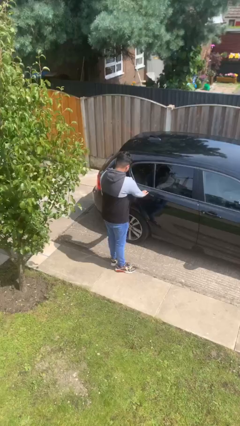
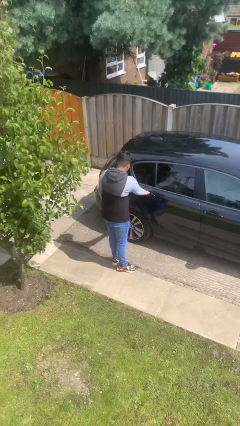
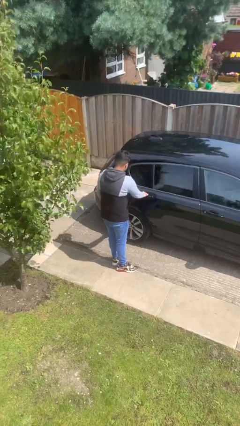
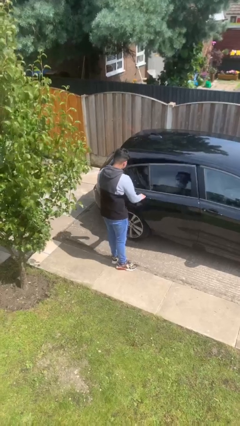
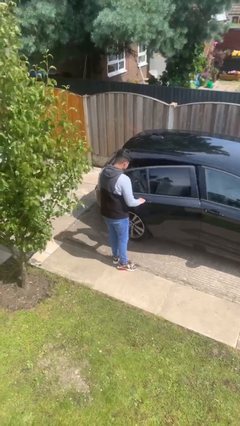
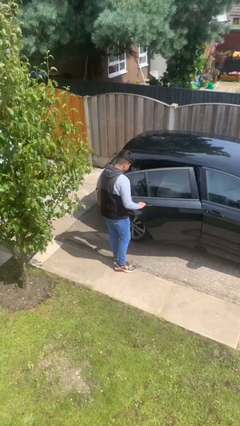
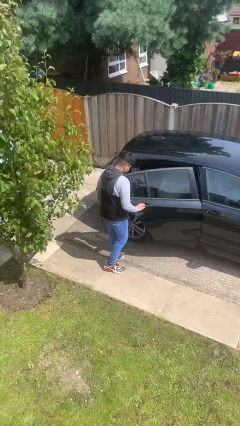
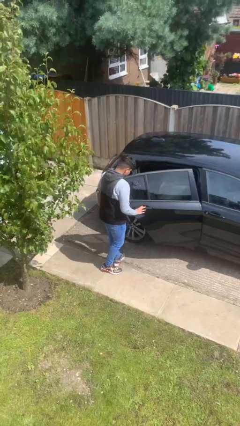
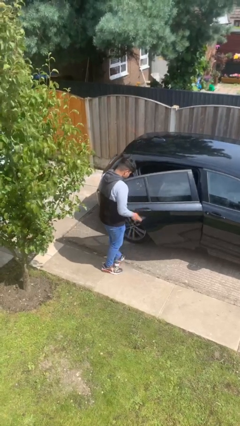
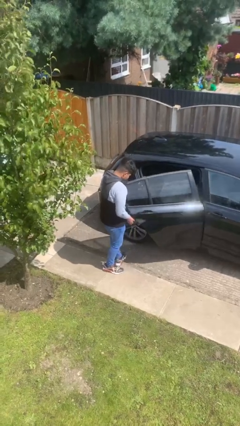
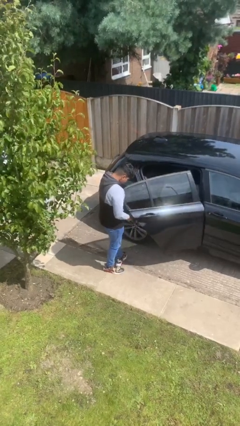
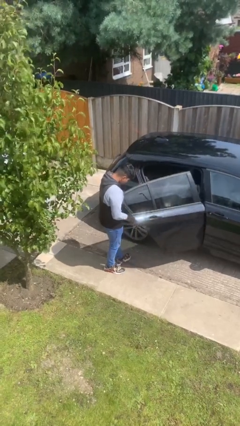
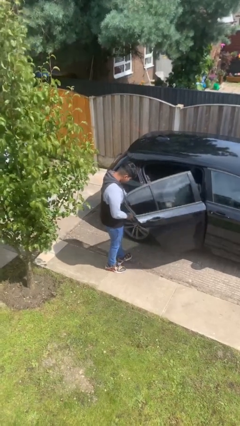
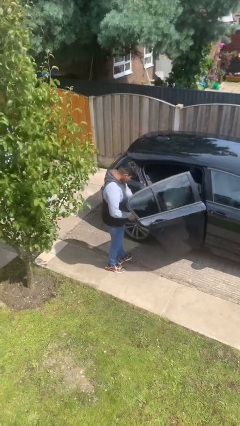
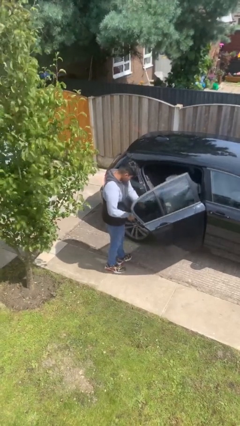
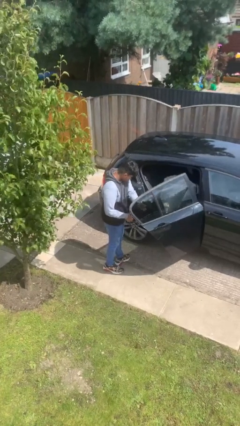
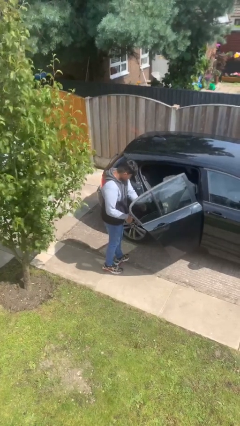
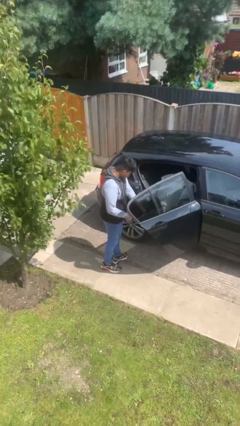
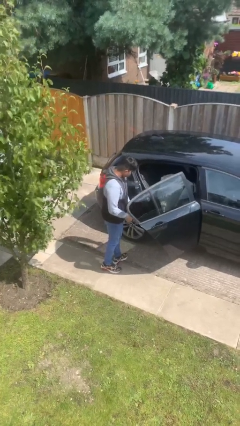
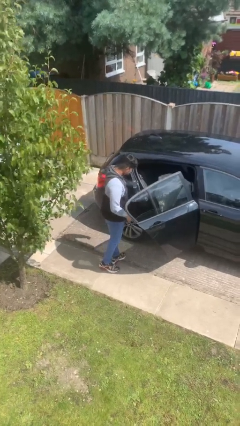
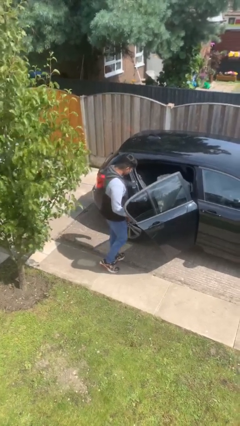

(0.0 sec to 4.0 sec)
person opens car door

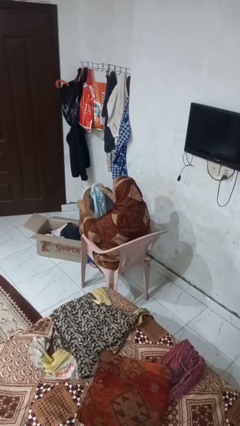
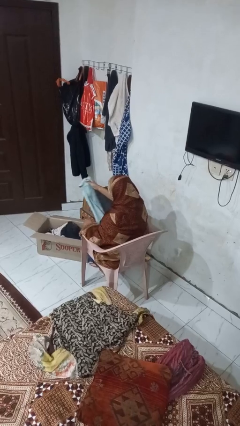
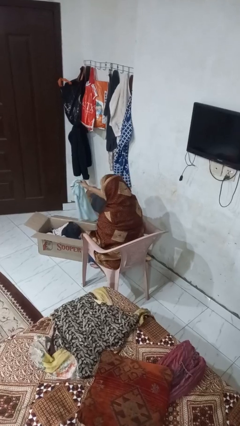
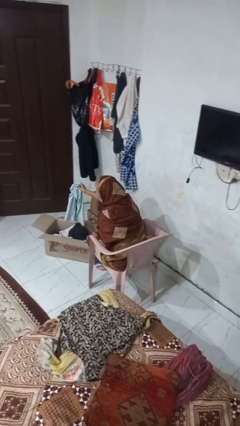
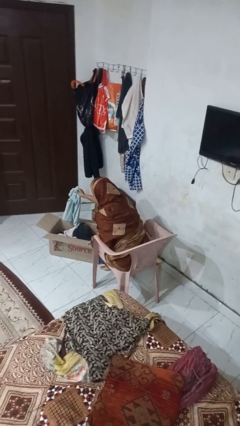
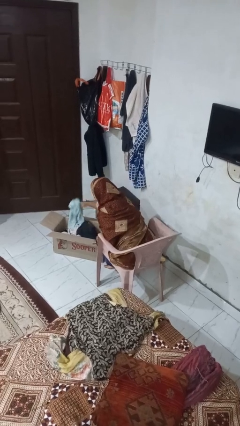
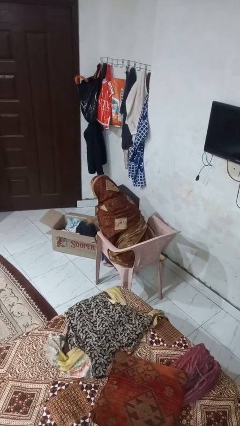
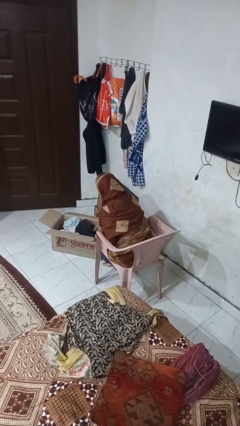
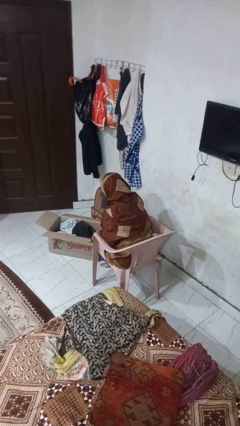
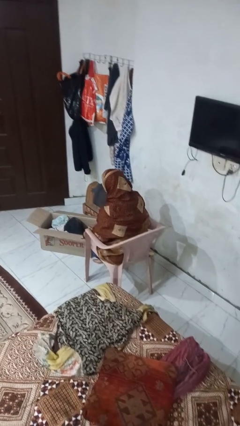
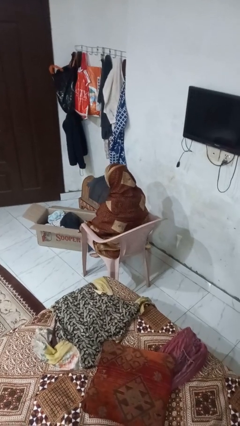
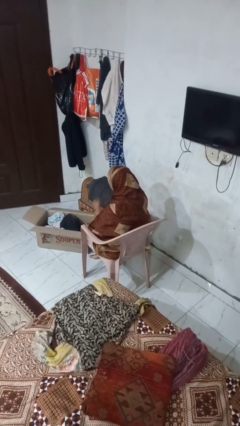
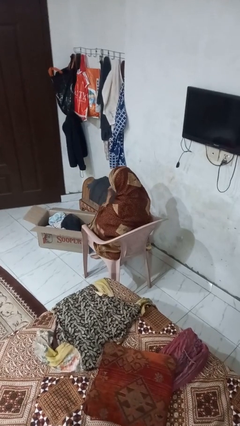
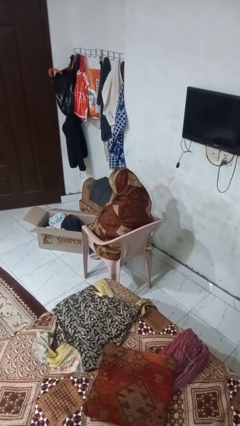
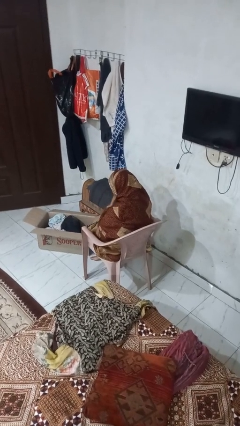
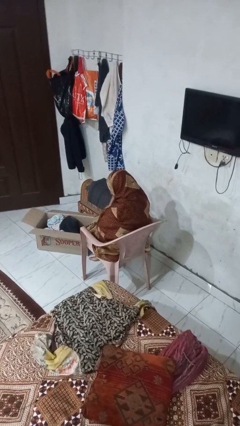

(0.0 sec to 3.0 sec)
person puts object into box

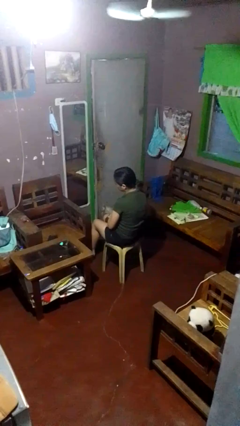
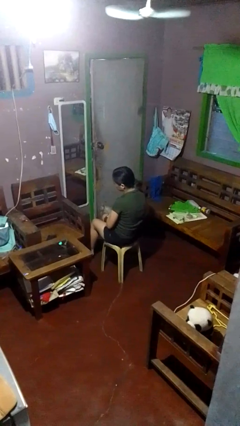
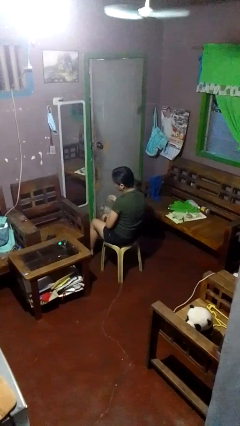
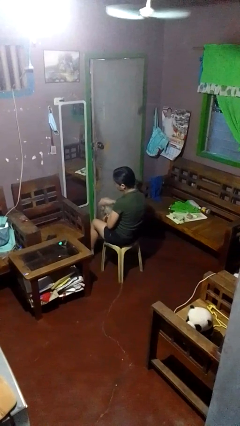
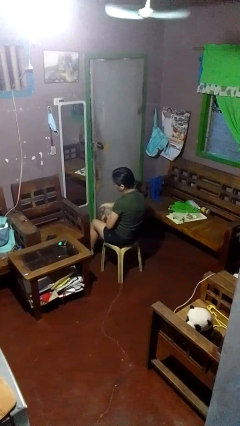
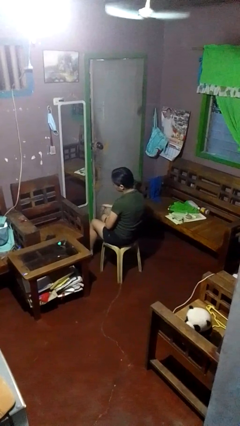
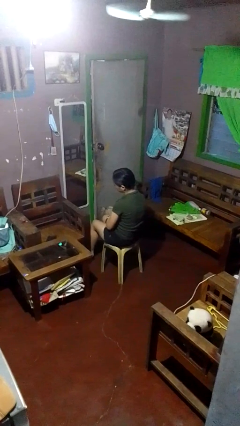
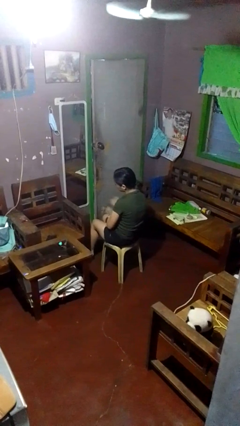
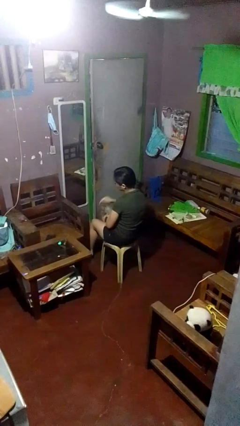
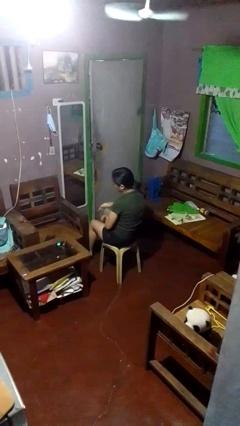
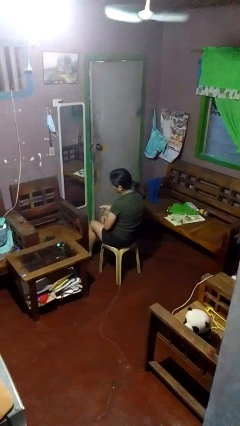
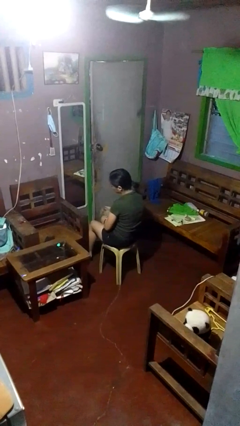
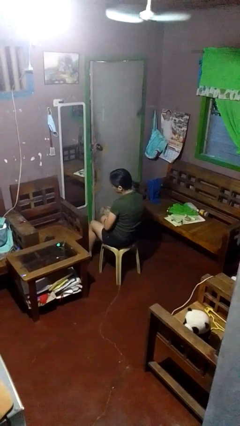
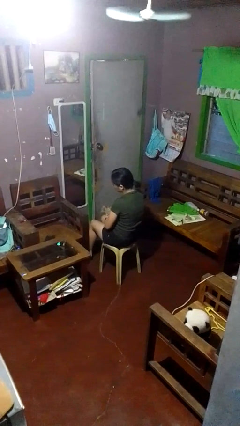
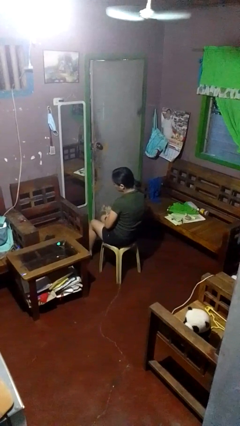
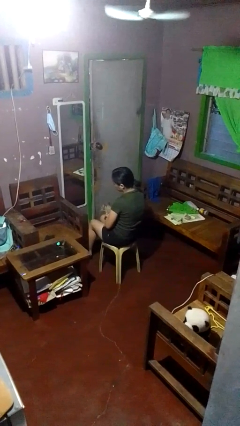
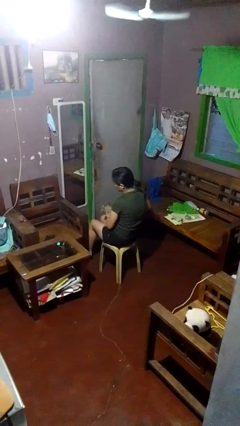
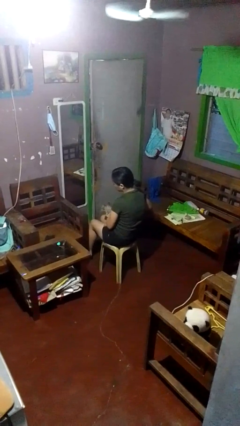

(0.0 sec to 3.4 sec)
person pets cat

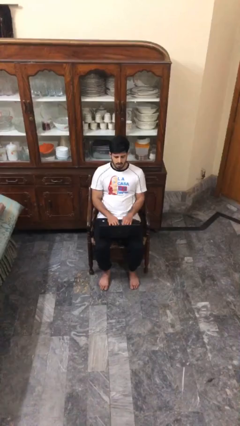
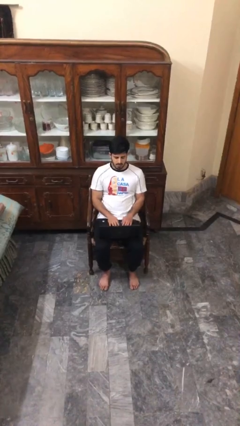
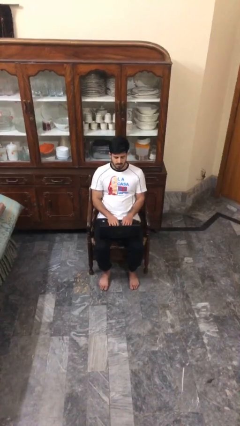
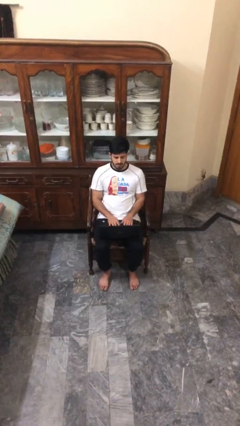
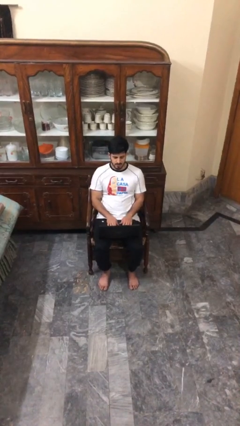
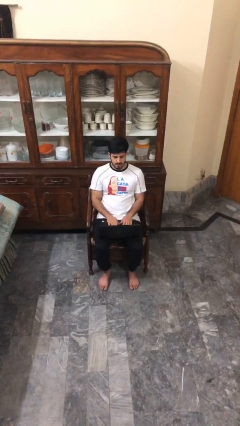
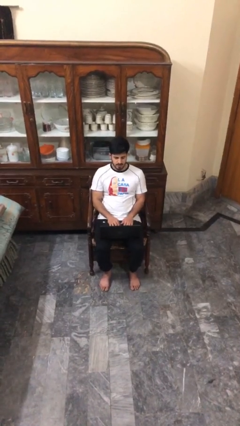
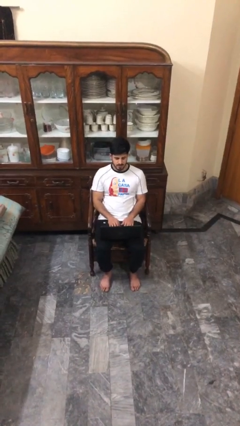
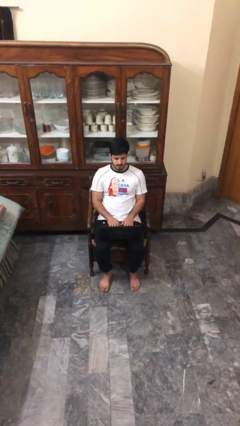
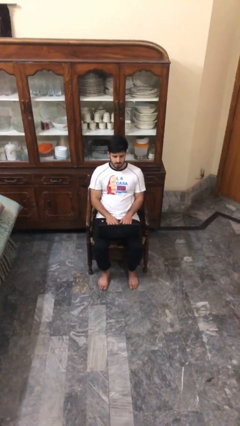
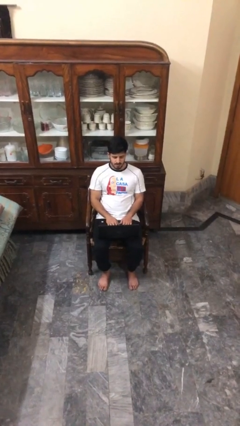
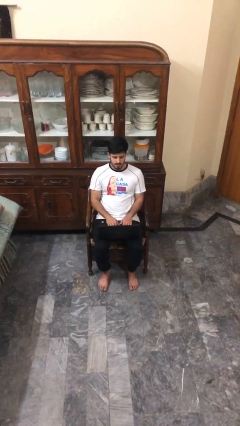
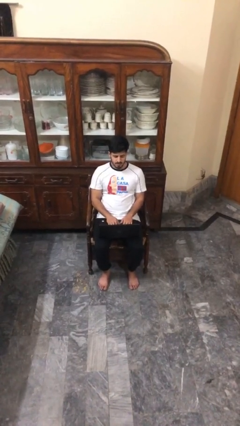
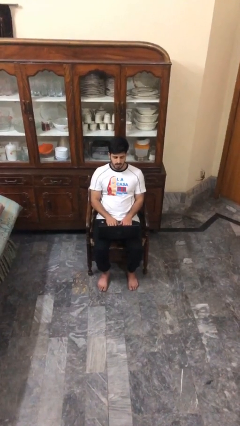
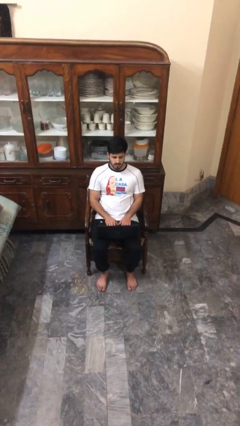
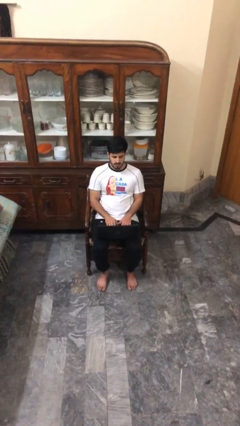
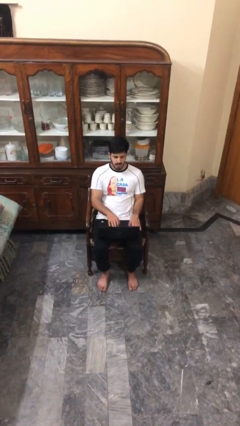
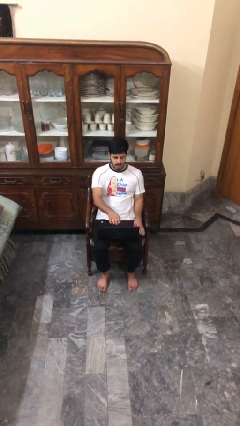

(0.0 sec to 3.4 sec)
person interacts with laptop

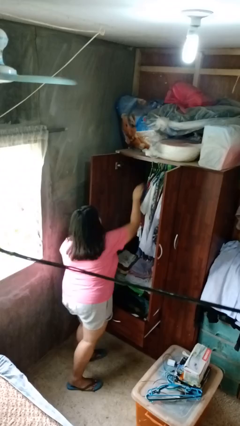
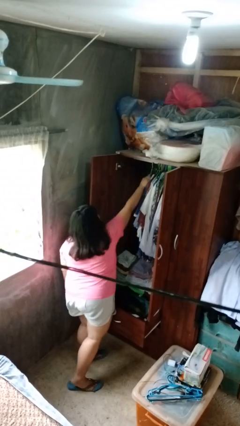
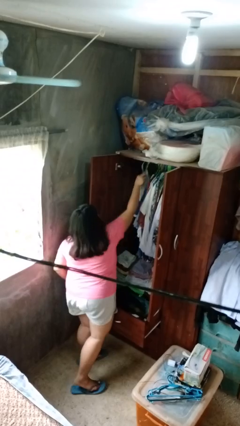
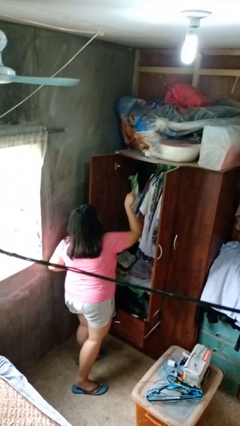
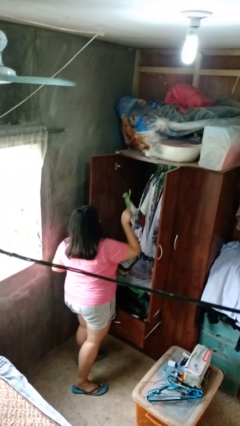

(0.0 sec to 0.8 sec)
person takes clothes from closet

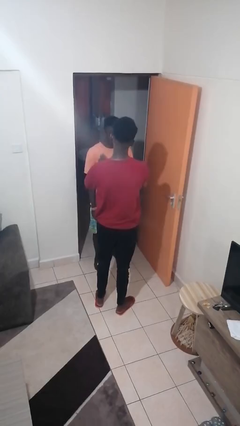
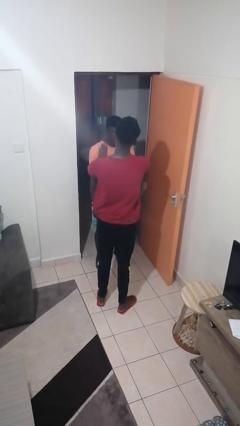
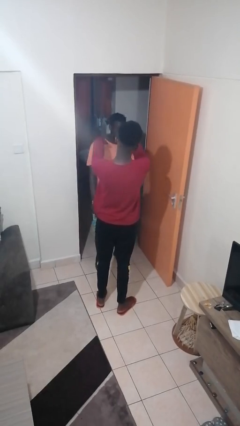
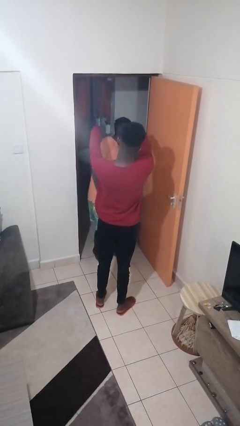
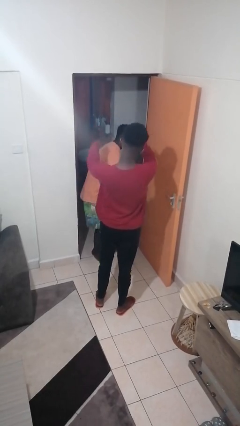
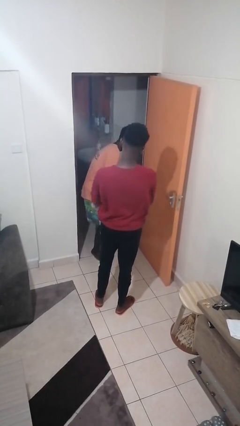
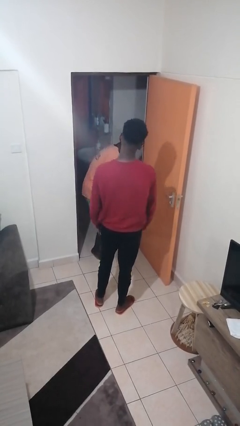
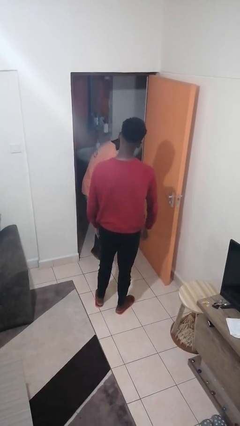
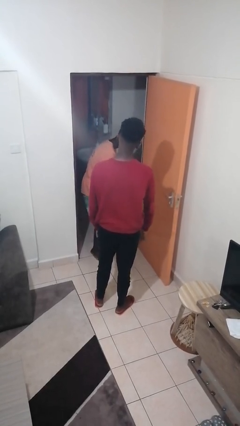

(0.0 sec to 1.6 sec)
person shoves person

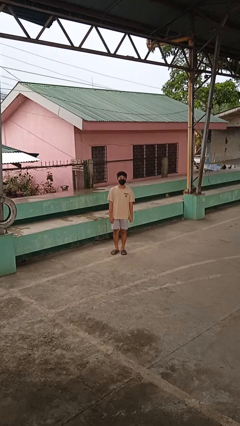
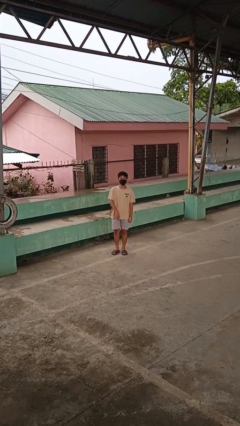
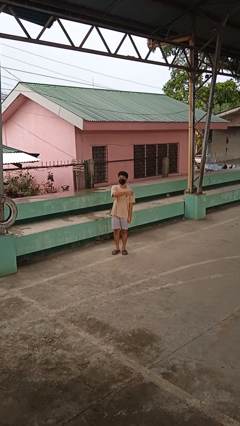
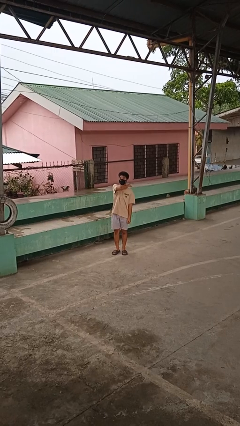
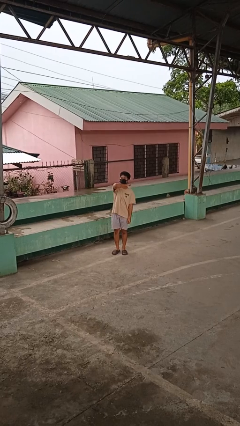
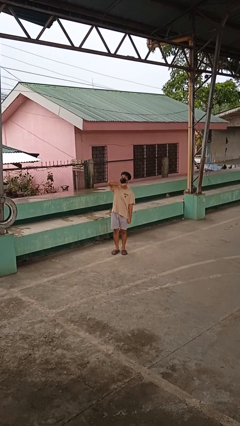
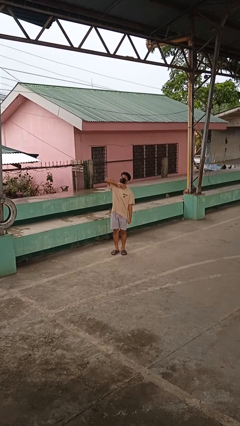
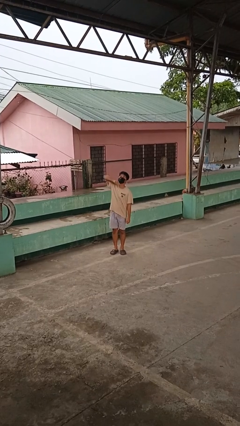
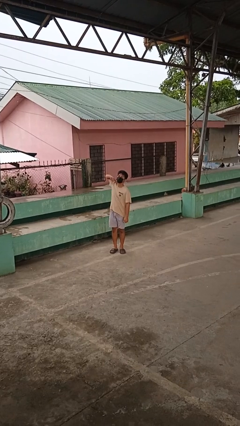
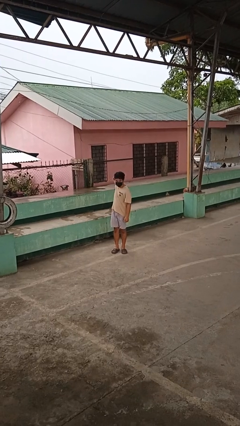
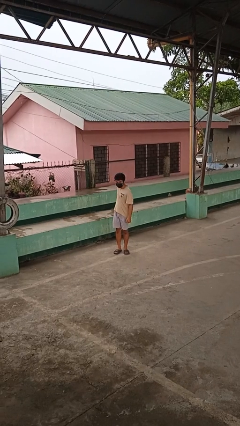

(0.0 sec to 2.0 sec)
person gestures cut
